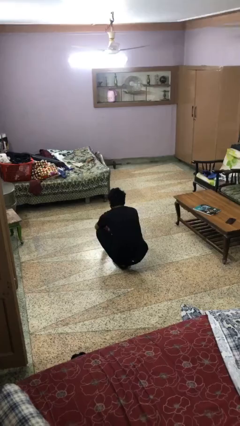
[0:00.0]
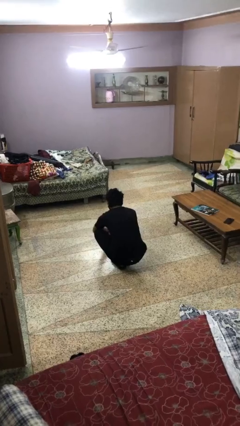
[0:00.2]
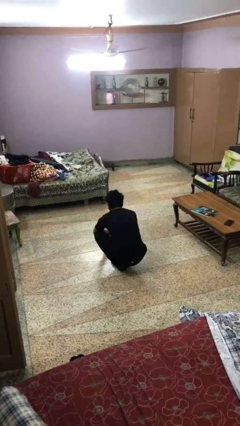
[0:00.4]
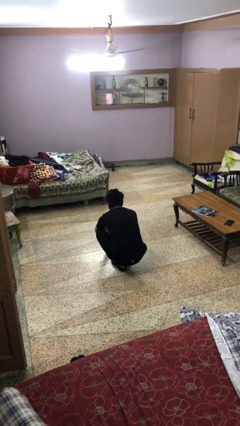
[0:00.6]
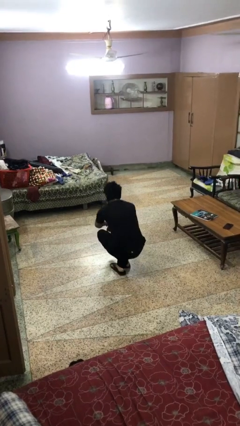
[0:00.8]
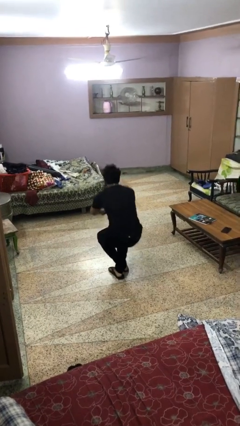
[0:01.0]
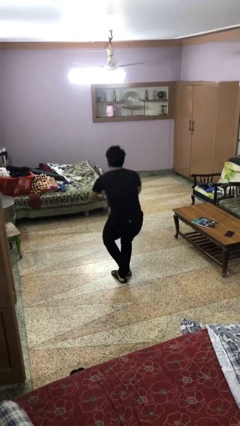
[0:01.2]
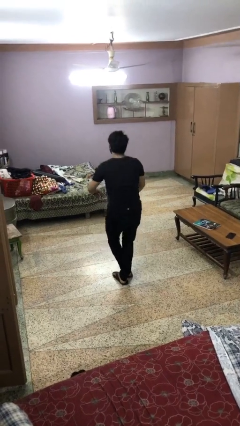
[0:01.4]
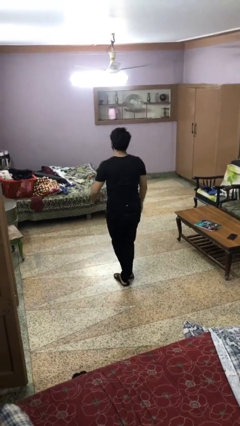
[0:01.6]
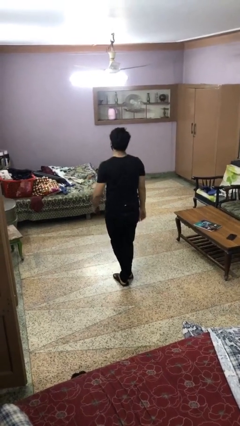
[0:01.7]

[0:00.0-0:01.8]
person stands up from floor

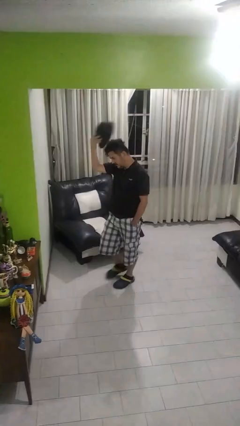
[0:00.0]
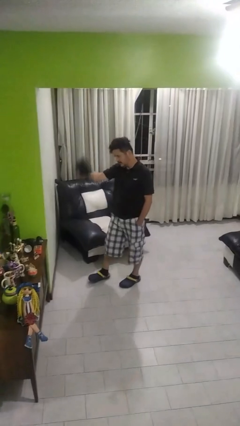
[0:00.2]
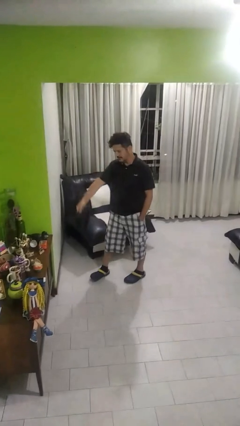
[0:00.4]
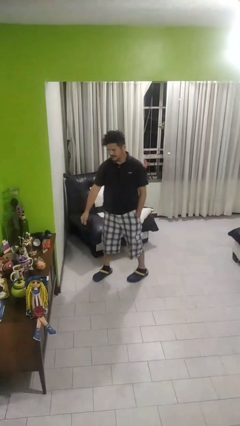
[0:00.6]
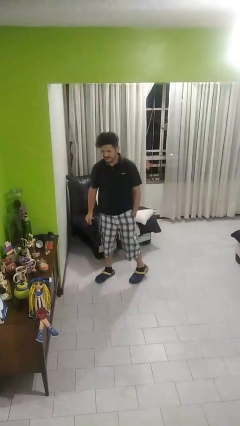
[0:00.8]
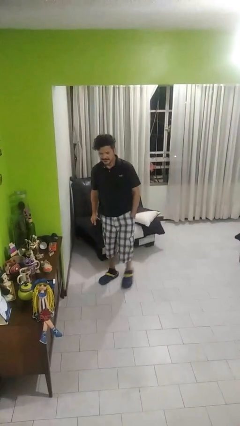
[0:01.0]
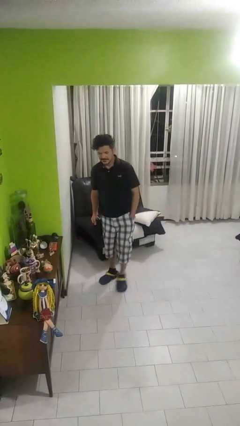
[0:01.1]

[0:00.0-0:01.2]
person takes off hat

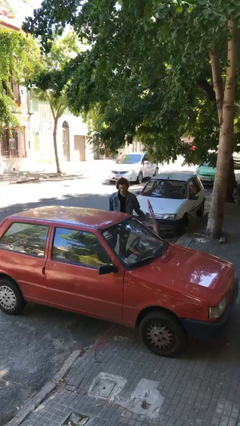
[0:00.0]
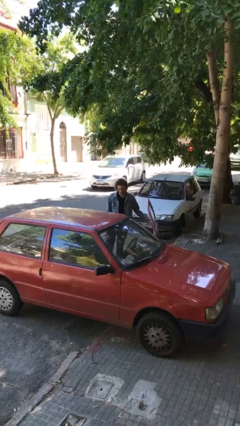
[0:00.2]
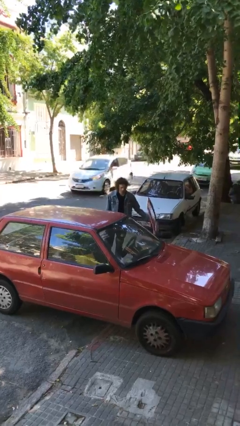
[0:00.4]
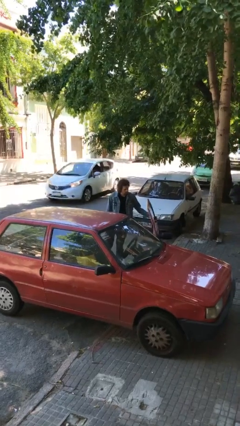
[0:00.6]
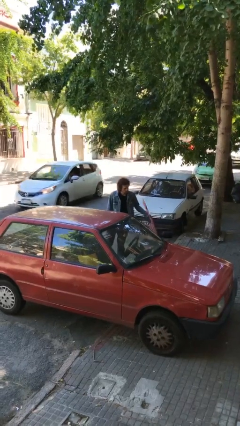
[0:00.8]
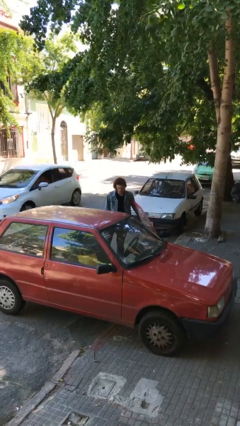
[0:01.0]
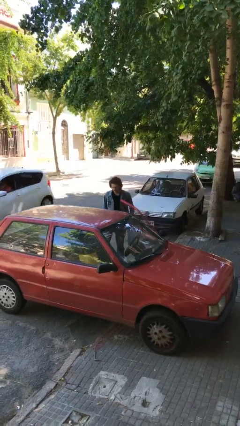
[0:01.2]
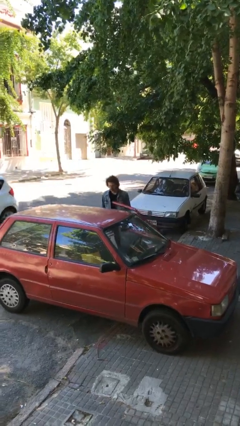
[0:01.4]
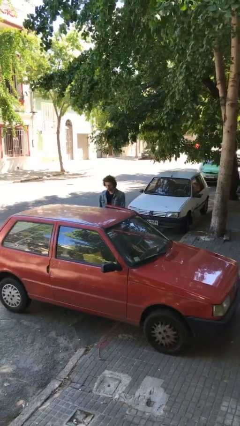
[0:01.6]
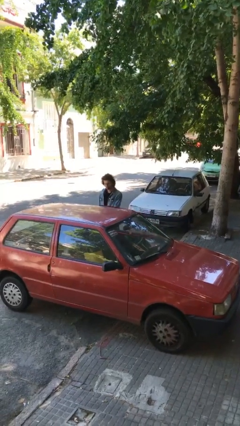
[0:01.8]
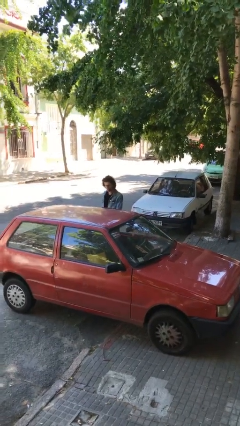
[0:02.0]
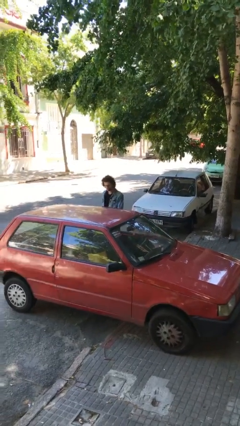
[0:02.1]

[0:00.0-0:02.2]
person closes car door

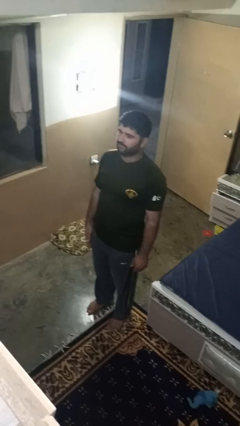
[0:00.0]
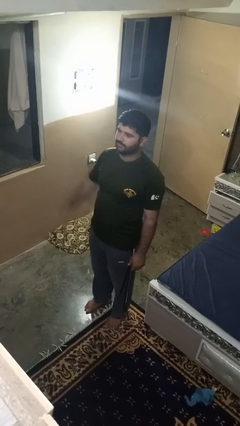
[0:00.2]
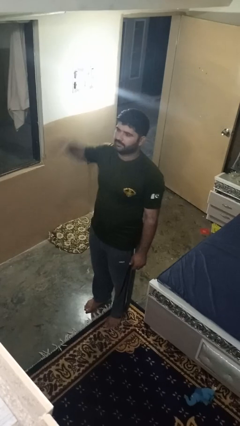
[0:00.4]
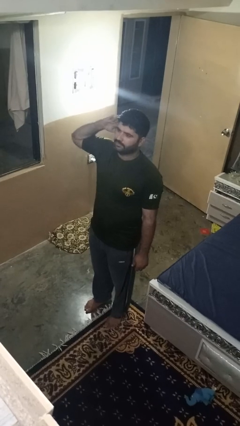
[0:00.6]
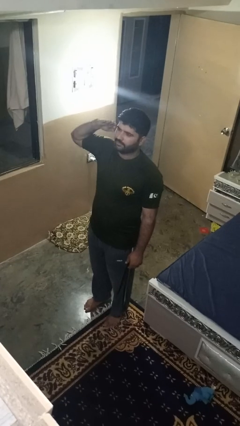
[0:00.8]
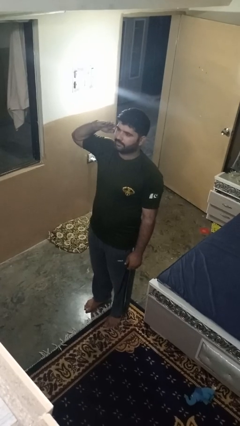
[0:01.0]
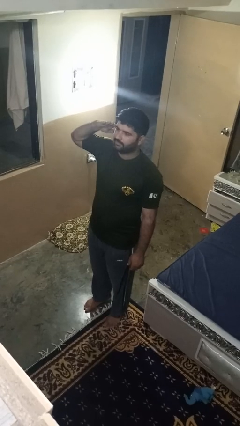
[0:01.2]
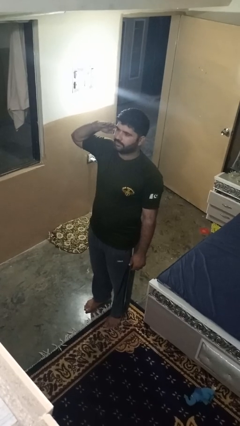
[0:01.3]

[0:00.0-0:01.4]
person salutes

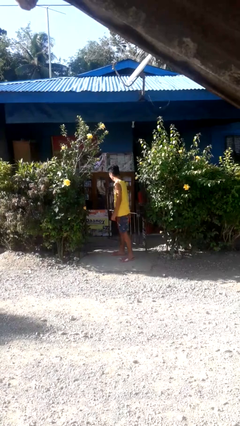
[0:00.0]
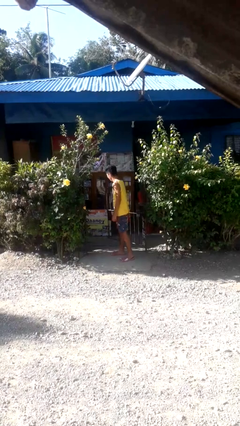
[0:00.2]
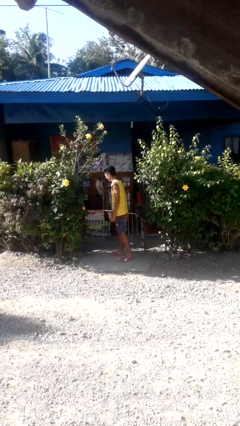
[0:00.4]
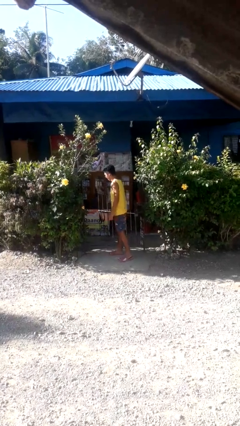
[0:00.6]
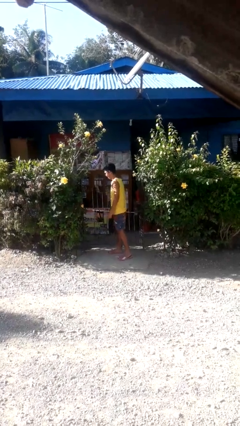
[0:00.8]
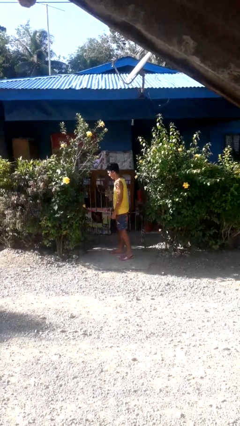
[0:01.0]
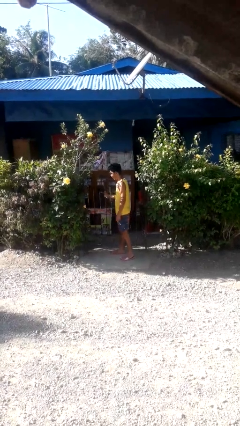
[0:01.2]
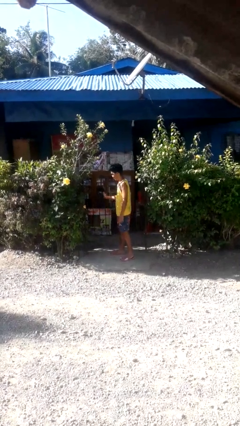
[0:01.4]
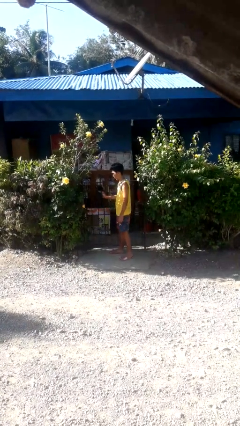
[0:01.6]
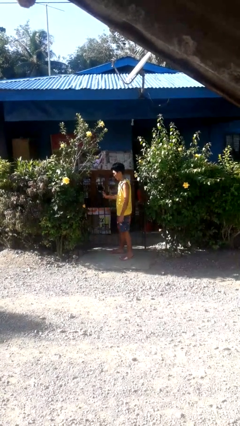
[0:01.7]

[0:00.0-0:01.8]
person closes gate

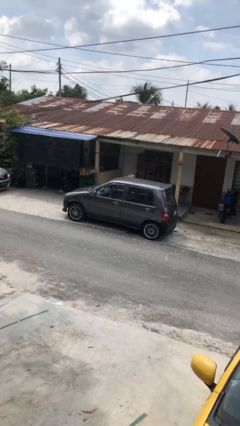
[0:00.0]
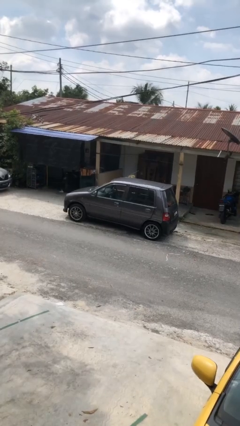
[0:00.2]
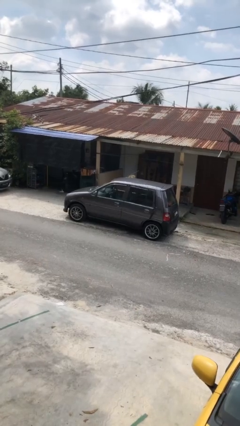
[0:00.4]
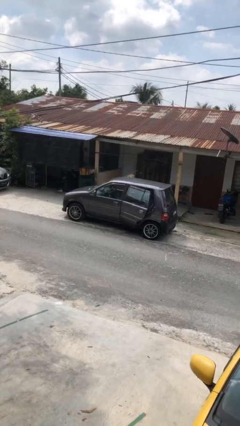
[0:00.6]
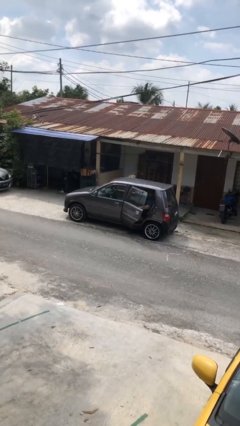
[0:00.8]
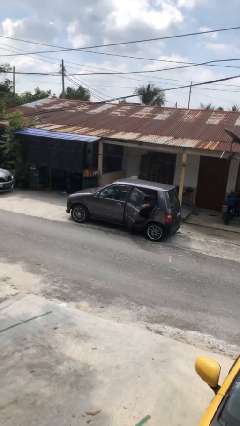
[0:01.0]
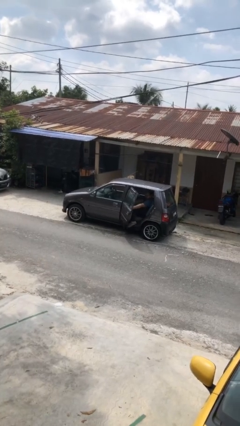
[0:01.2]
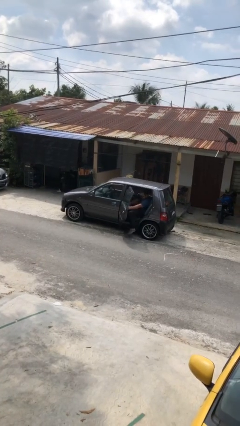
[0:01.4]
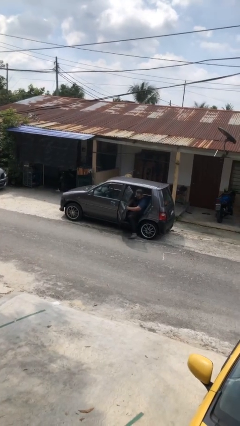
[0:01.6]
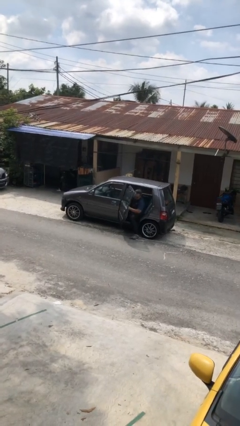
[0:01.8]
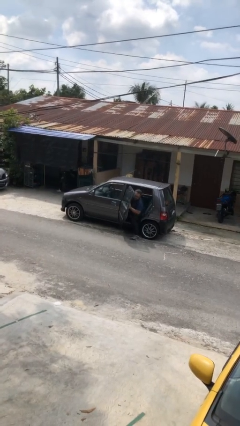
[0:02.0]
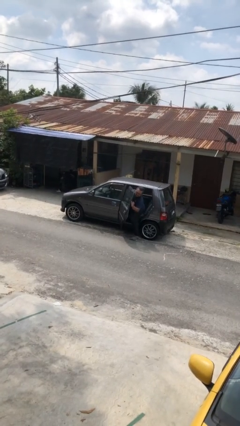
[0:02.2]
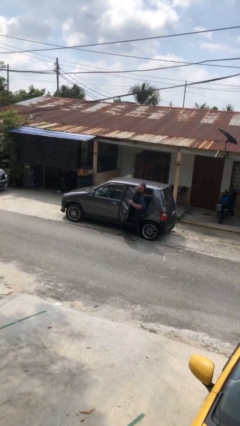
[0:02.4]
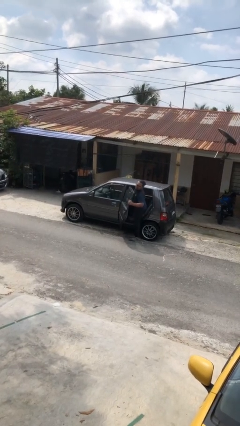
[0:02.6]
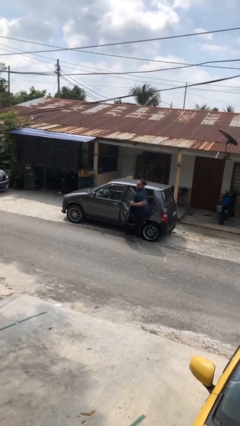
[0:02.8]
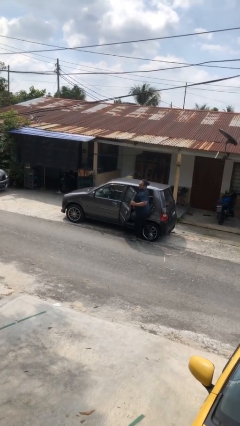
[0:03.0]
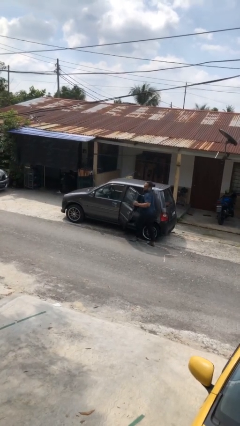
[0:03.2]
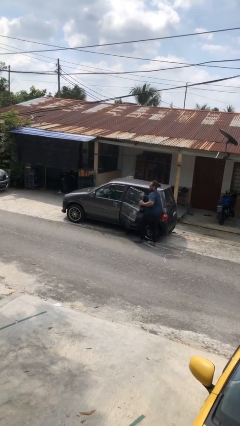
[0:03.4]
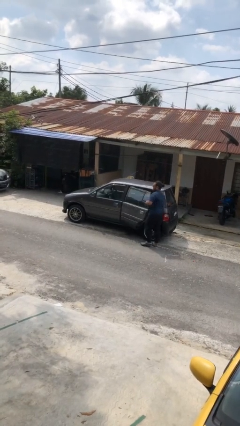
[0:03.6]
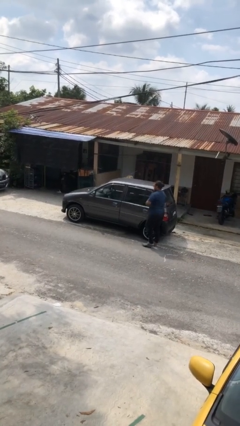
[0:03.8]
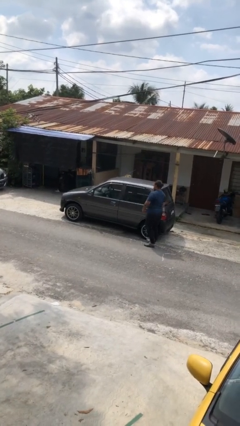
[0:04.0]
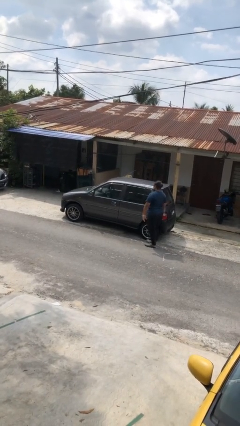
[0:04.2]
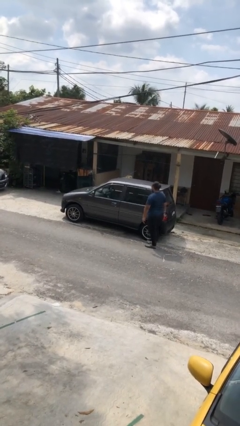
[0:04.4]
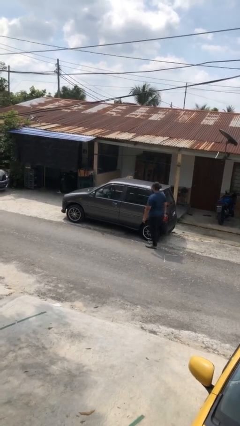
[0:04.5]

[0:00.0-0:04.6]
car drops off person

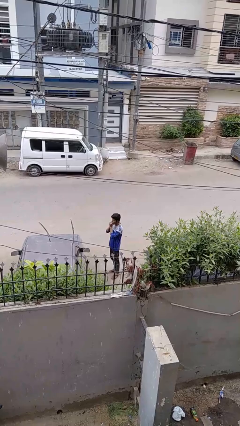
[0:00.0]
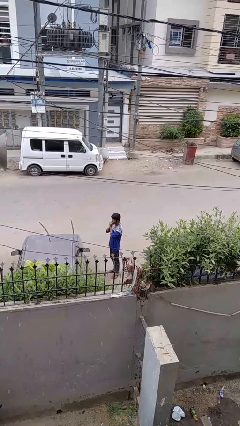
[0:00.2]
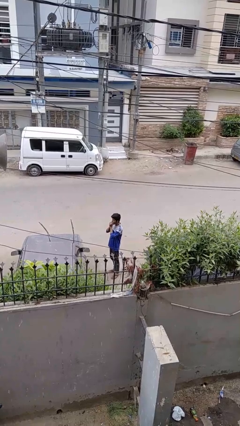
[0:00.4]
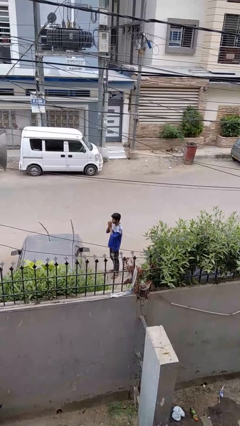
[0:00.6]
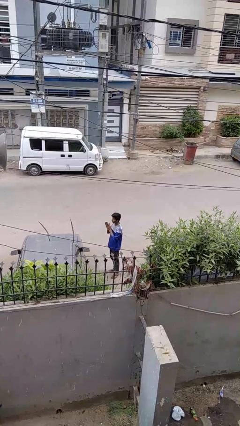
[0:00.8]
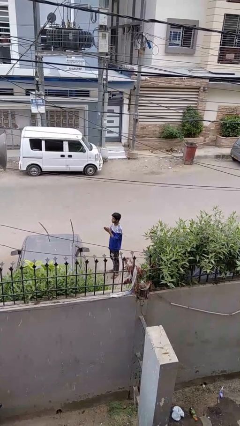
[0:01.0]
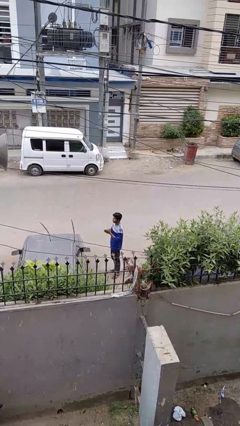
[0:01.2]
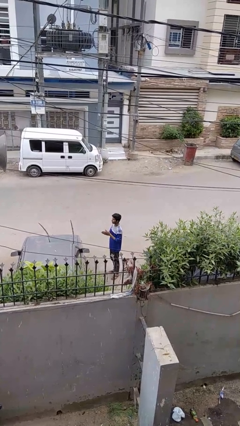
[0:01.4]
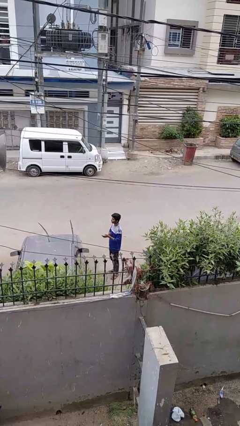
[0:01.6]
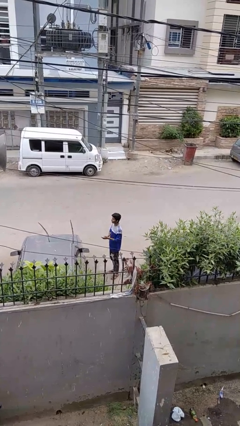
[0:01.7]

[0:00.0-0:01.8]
person blows into hands

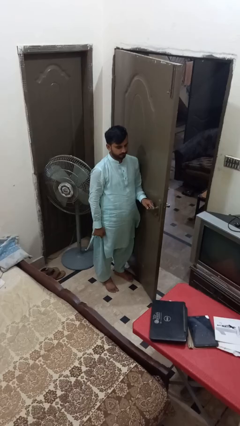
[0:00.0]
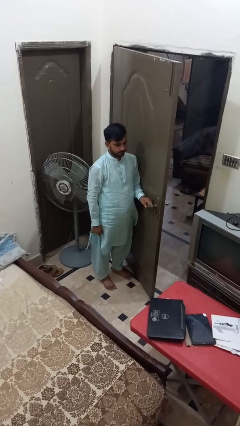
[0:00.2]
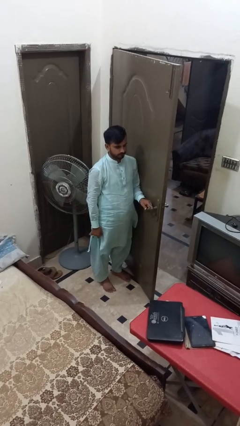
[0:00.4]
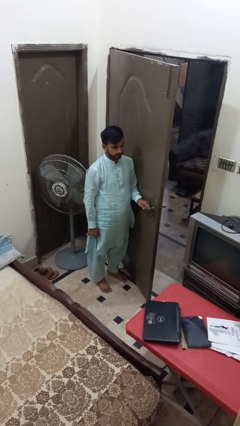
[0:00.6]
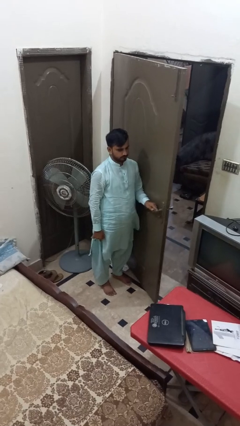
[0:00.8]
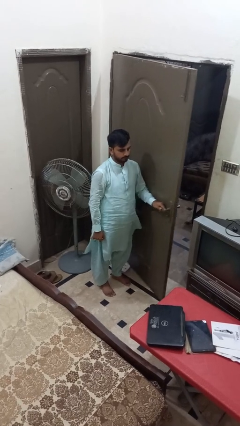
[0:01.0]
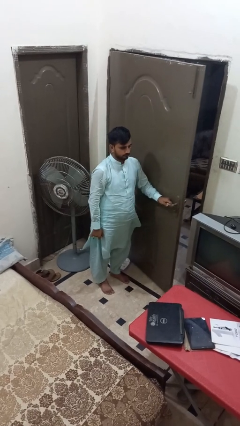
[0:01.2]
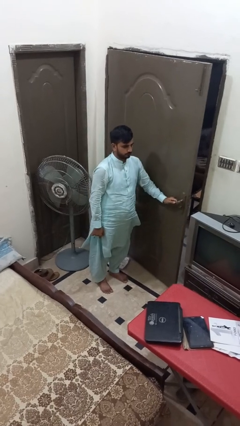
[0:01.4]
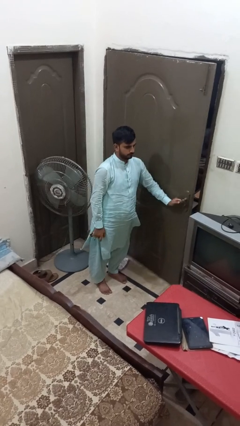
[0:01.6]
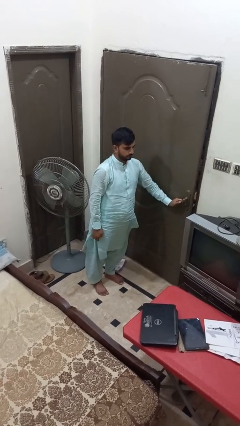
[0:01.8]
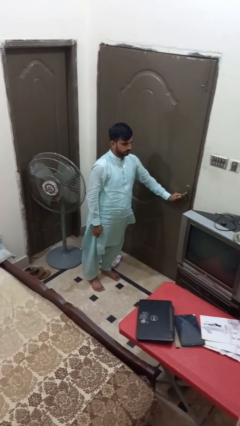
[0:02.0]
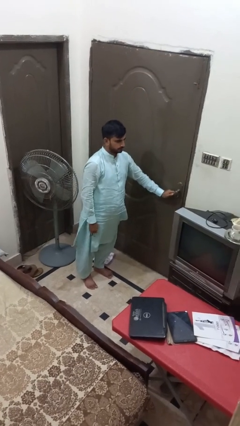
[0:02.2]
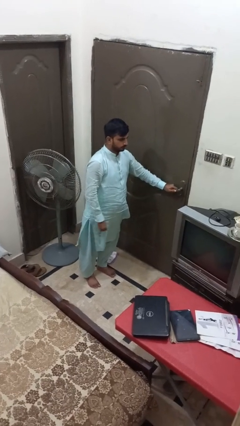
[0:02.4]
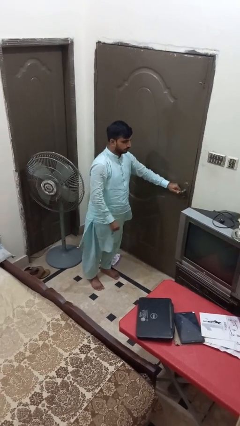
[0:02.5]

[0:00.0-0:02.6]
person closes facility door
